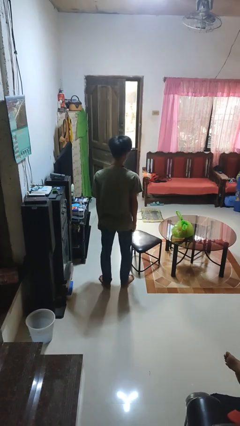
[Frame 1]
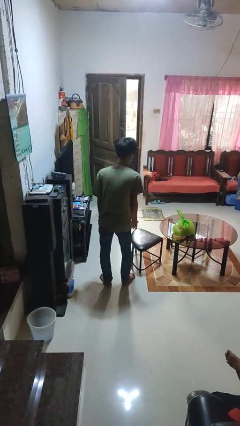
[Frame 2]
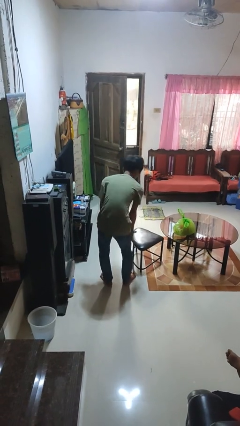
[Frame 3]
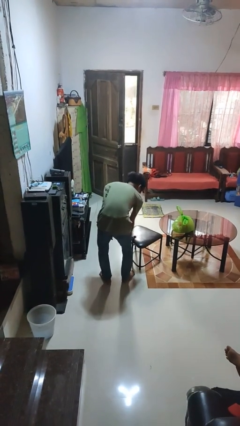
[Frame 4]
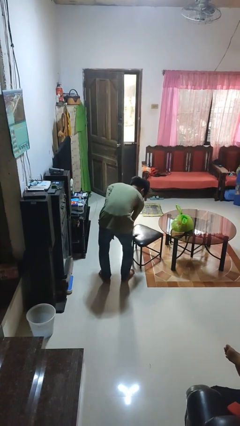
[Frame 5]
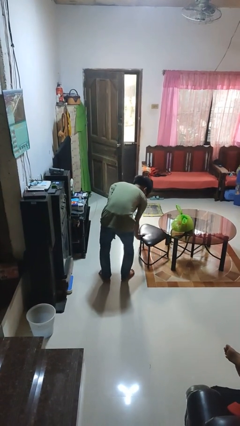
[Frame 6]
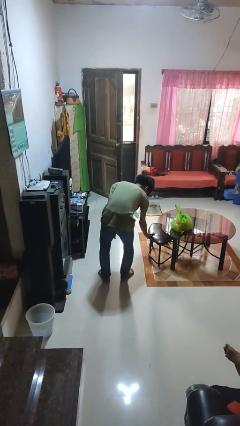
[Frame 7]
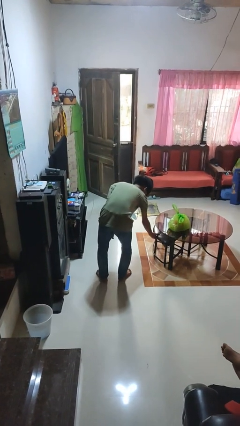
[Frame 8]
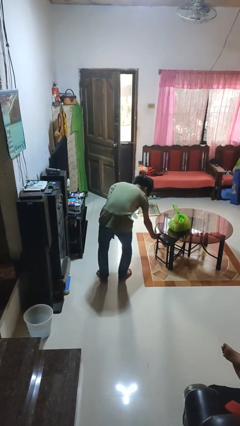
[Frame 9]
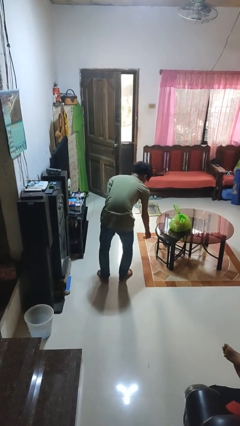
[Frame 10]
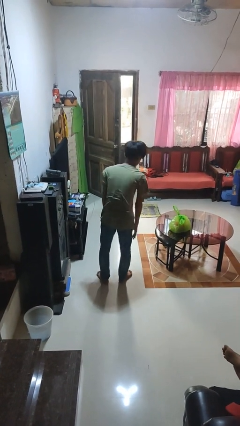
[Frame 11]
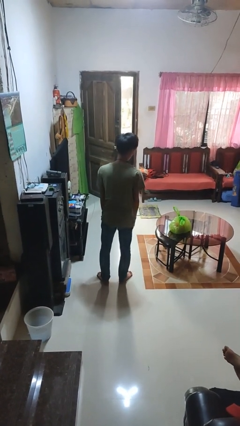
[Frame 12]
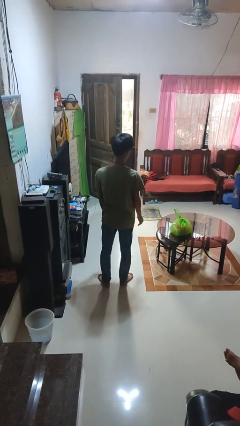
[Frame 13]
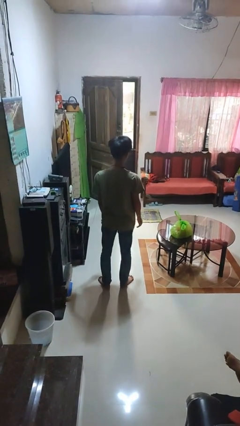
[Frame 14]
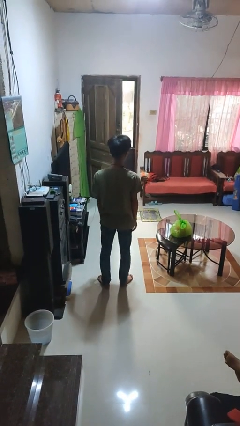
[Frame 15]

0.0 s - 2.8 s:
person pushes in chair

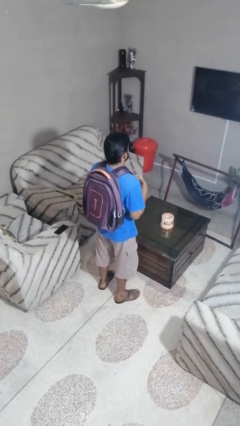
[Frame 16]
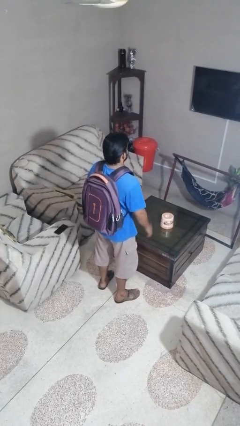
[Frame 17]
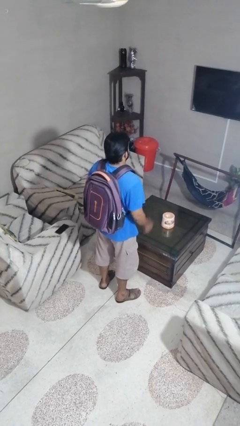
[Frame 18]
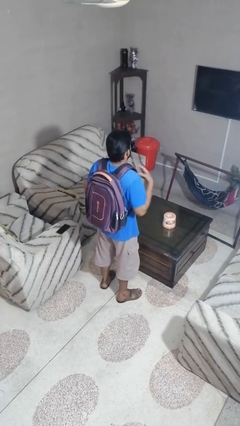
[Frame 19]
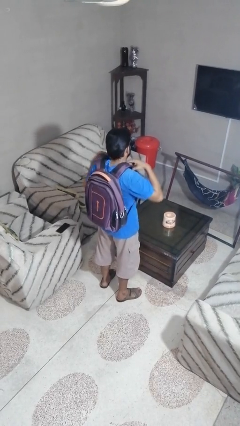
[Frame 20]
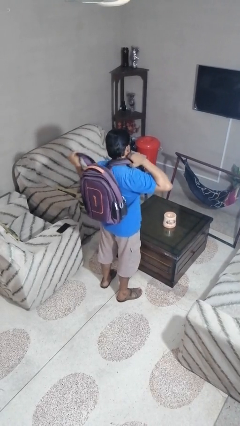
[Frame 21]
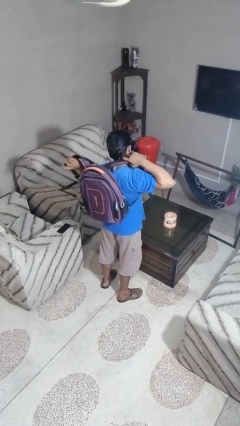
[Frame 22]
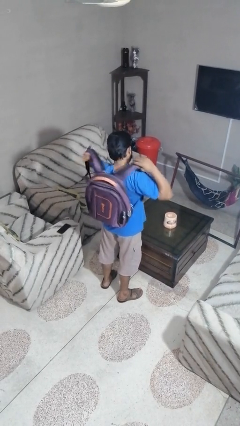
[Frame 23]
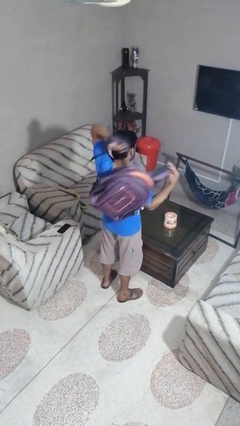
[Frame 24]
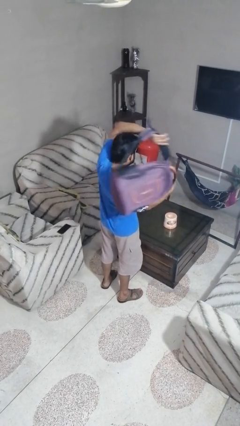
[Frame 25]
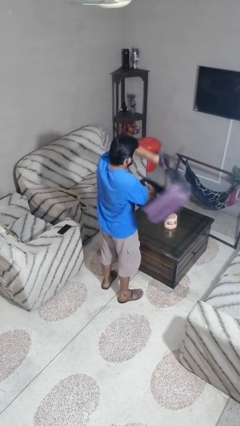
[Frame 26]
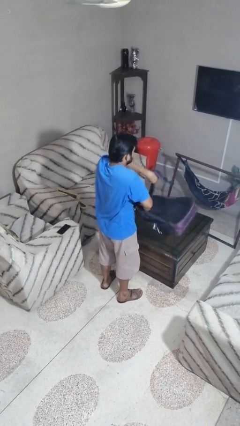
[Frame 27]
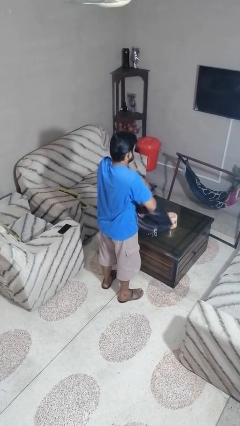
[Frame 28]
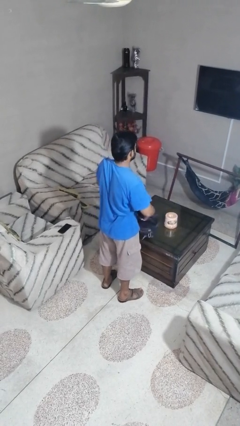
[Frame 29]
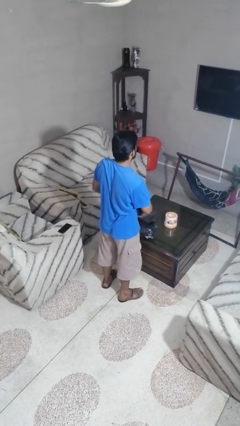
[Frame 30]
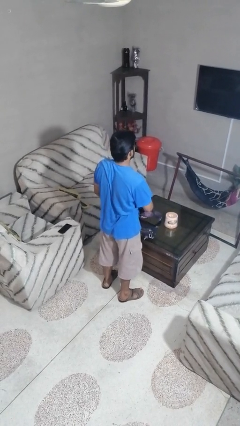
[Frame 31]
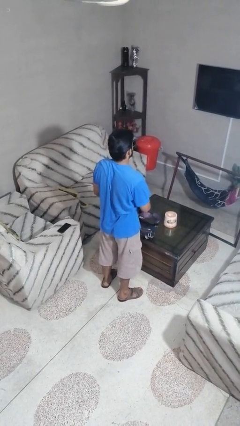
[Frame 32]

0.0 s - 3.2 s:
person takes off backpack

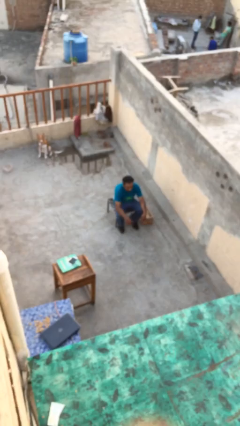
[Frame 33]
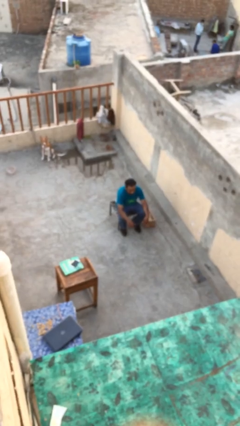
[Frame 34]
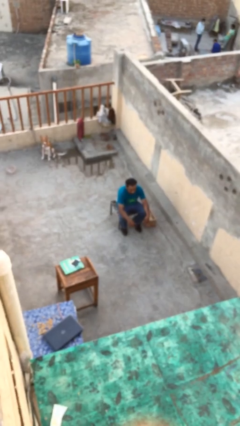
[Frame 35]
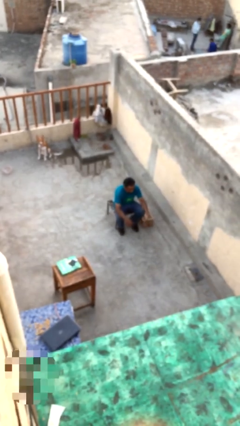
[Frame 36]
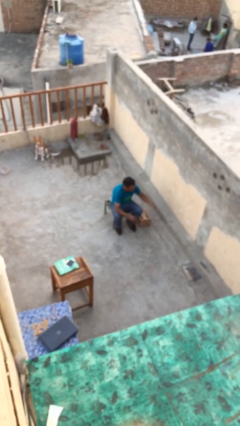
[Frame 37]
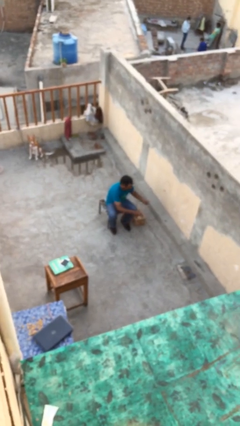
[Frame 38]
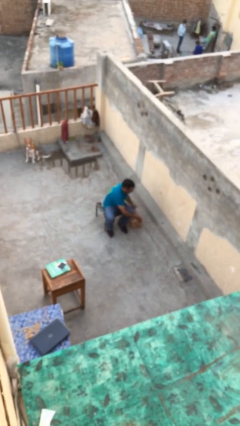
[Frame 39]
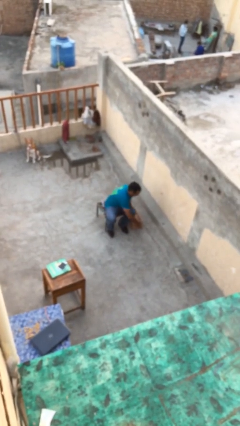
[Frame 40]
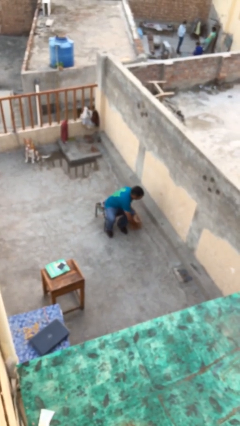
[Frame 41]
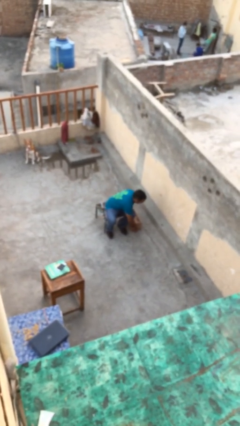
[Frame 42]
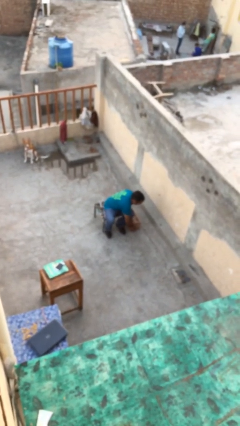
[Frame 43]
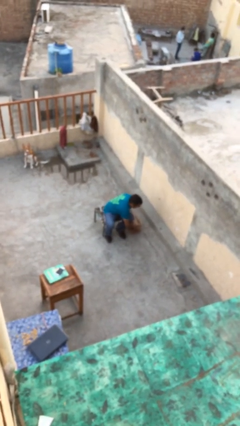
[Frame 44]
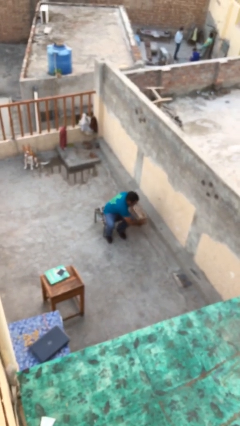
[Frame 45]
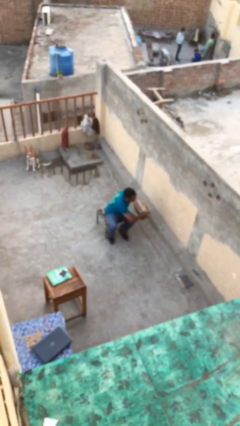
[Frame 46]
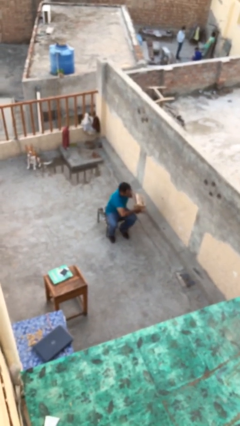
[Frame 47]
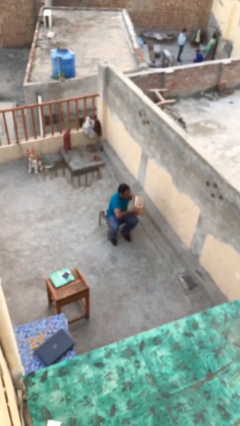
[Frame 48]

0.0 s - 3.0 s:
person picks up object from floor

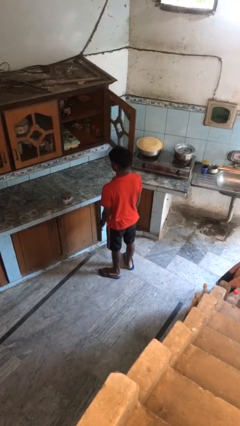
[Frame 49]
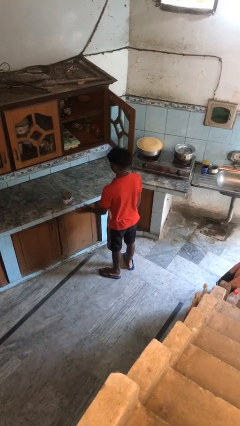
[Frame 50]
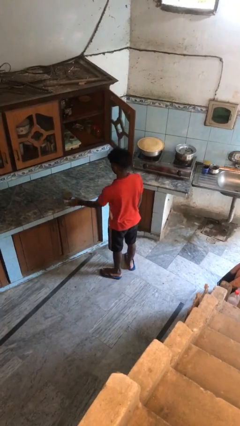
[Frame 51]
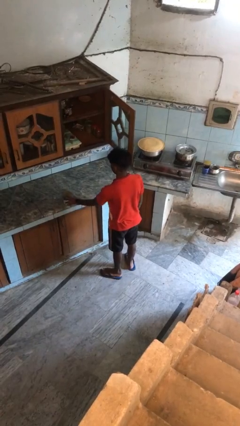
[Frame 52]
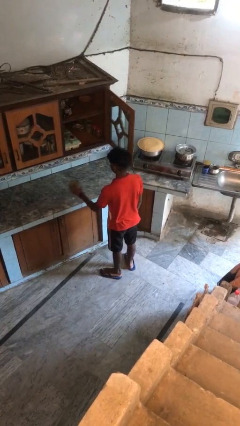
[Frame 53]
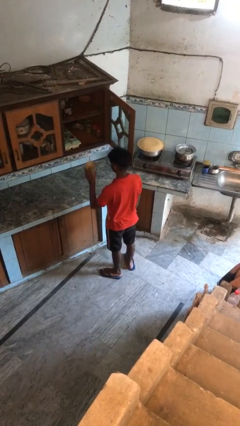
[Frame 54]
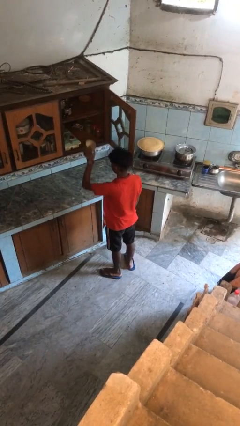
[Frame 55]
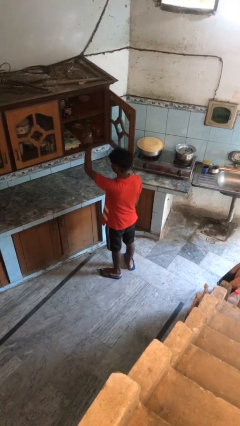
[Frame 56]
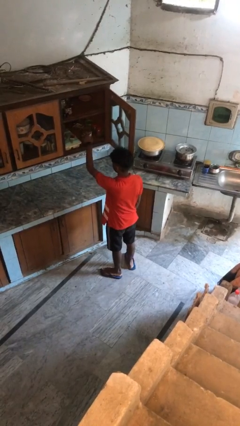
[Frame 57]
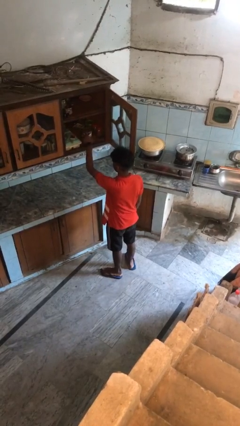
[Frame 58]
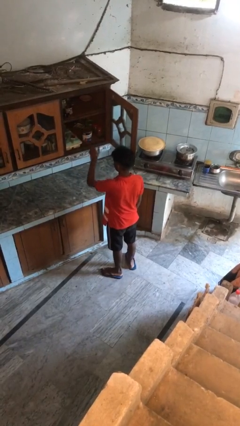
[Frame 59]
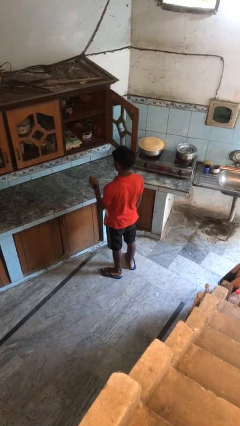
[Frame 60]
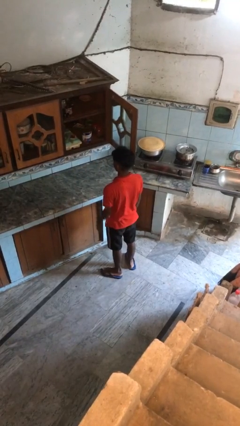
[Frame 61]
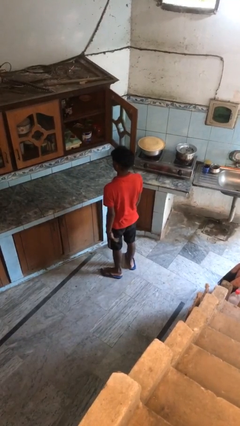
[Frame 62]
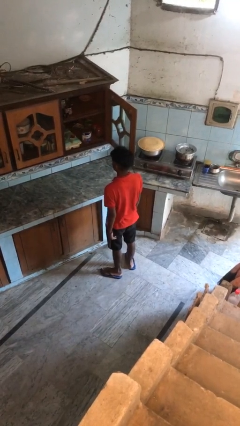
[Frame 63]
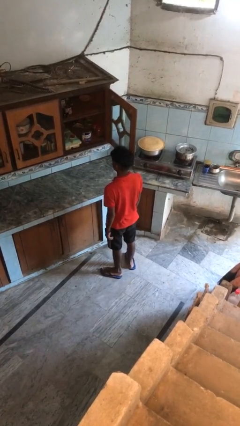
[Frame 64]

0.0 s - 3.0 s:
person puts object in cabinet

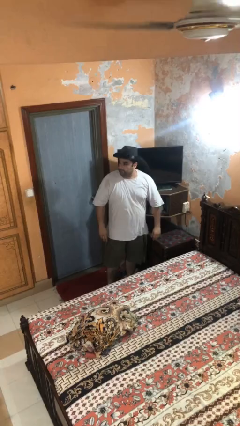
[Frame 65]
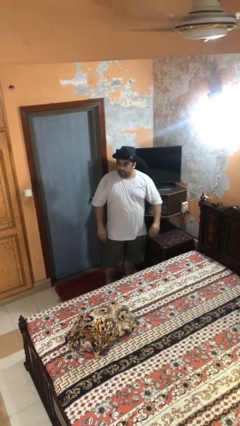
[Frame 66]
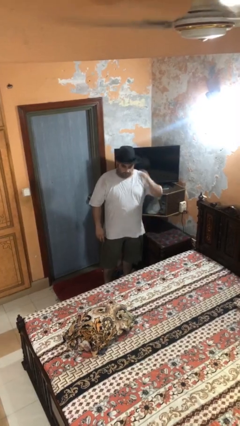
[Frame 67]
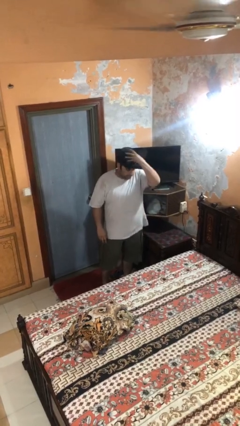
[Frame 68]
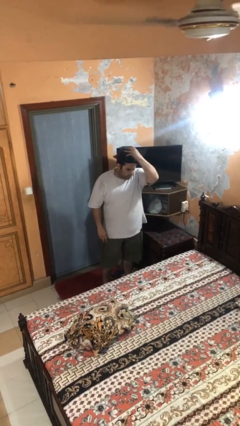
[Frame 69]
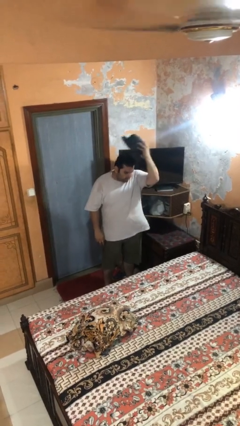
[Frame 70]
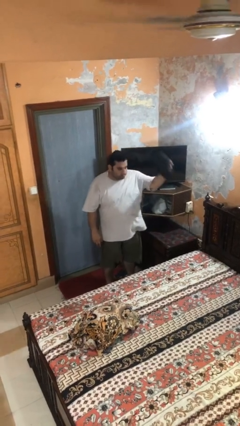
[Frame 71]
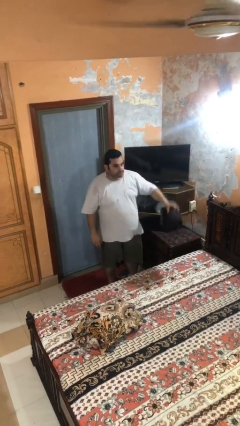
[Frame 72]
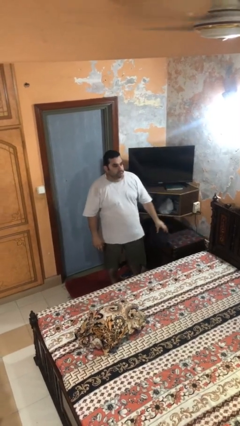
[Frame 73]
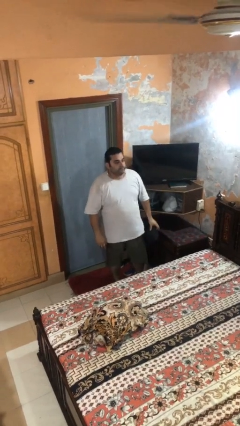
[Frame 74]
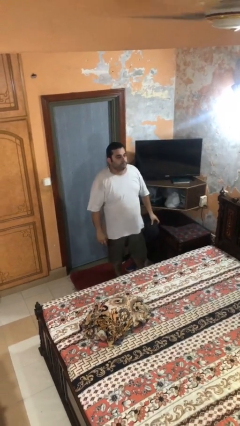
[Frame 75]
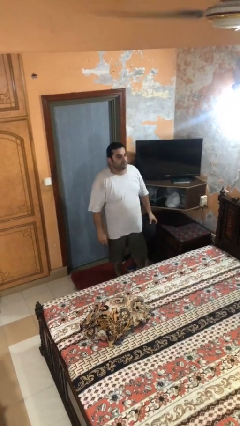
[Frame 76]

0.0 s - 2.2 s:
person takes off hat

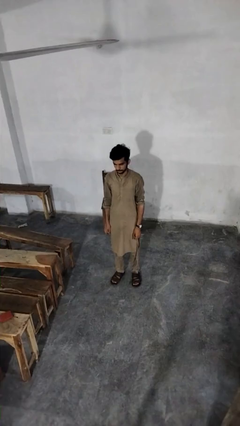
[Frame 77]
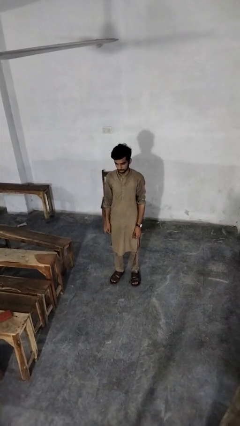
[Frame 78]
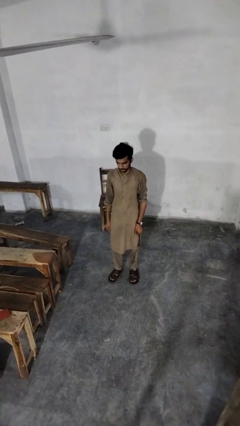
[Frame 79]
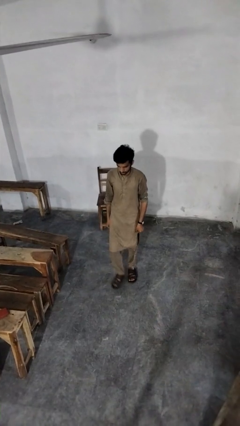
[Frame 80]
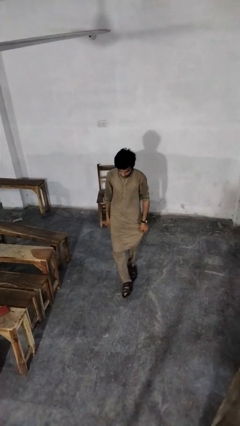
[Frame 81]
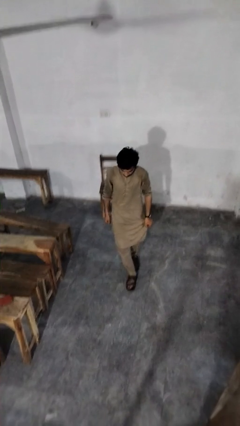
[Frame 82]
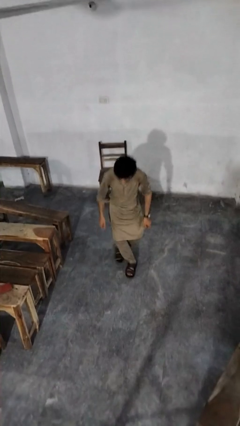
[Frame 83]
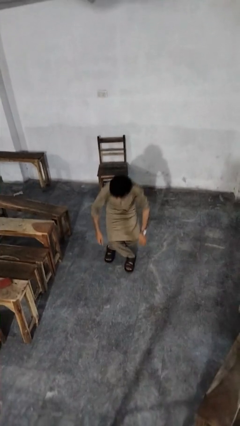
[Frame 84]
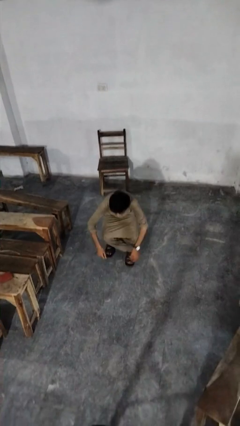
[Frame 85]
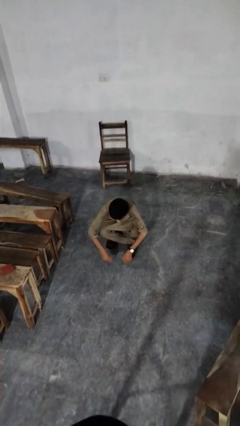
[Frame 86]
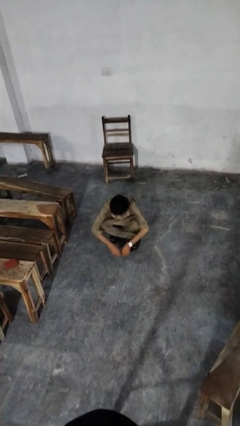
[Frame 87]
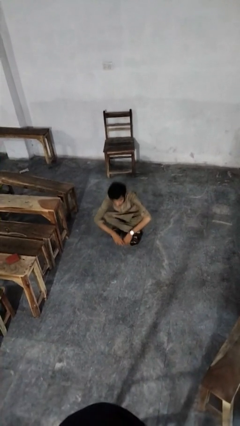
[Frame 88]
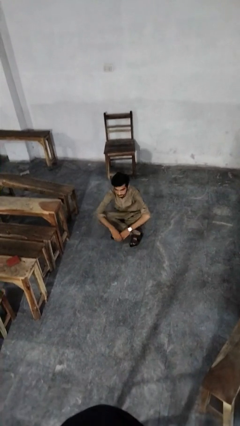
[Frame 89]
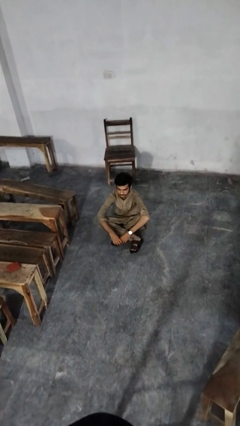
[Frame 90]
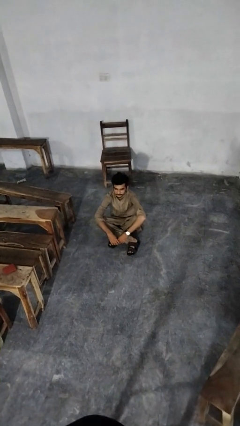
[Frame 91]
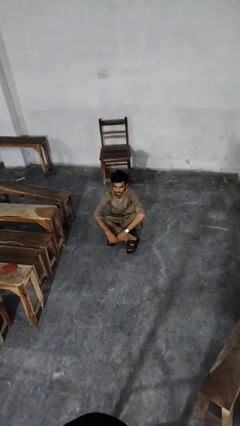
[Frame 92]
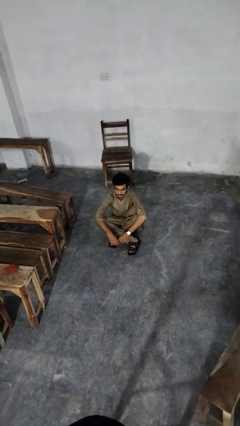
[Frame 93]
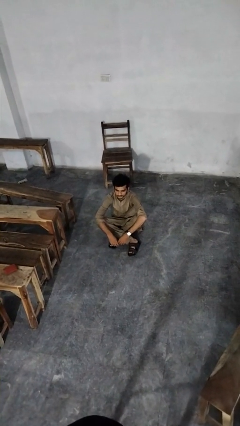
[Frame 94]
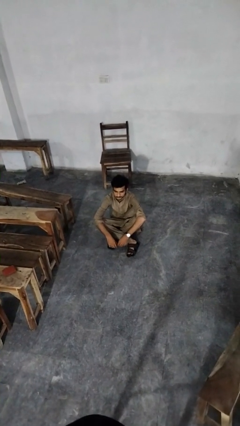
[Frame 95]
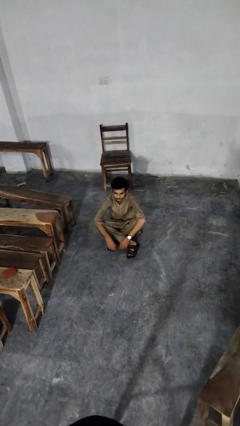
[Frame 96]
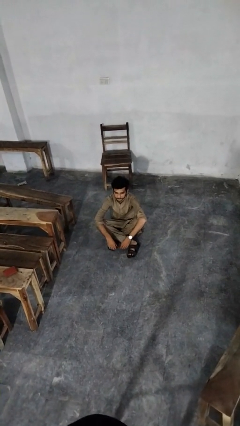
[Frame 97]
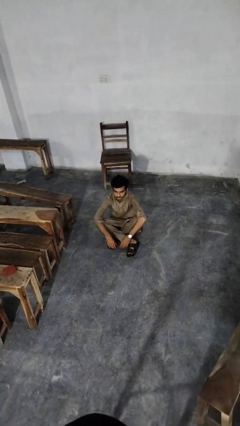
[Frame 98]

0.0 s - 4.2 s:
person sits crisscross
